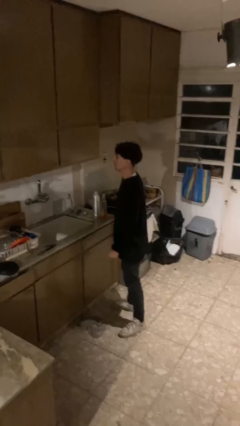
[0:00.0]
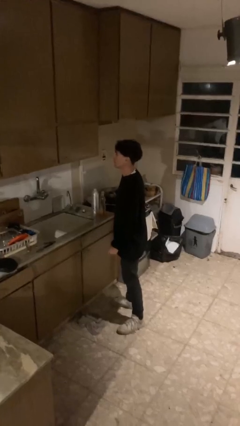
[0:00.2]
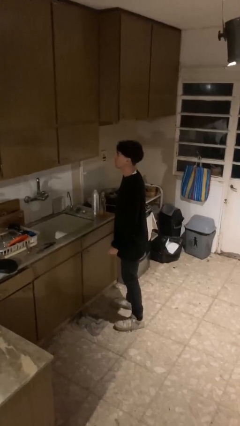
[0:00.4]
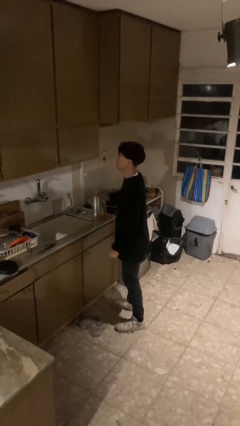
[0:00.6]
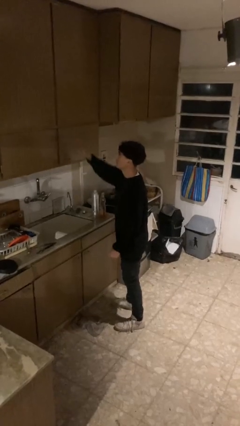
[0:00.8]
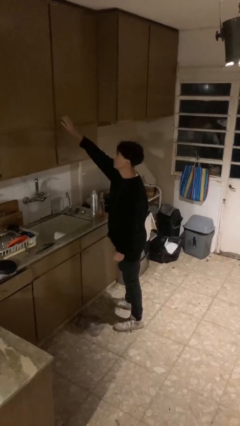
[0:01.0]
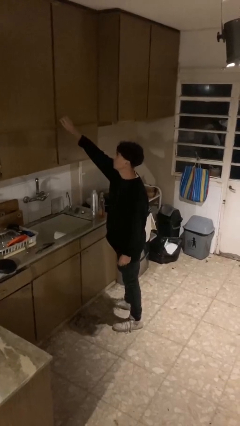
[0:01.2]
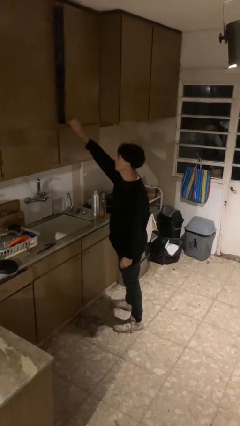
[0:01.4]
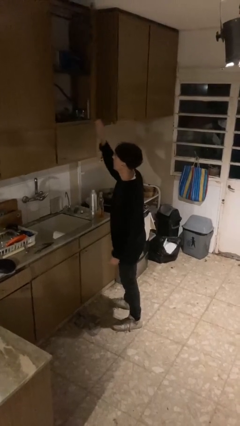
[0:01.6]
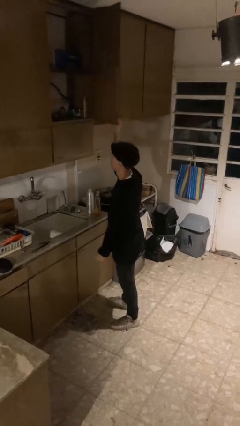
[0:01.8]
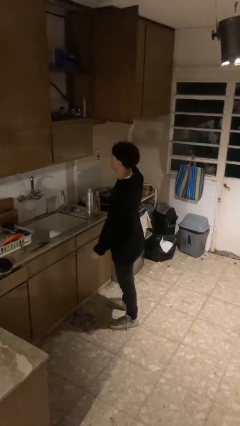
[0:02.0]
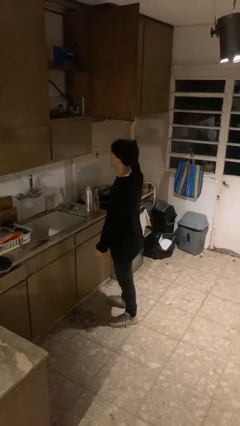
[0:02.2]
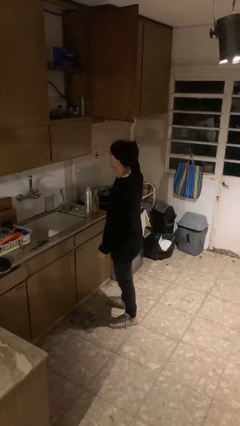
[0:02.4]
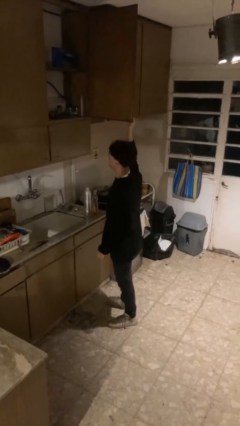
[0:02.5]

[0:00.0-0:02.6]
person closes cabinet

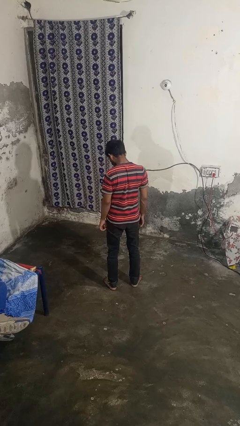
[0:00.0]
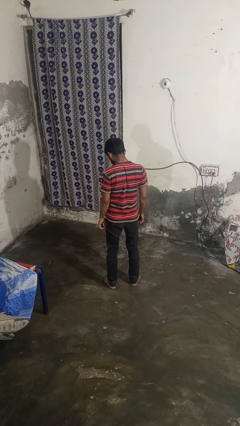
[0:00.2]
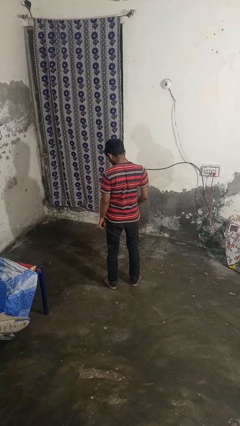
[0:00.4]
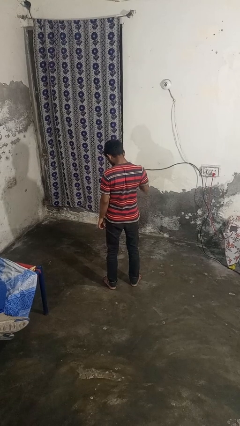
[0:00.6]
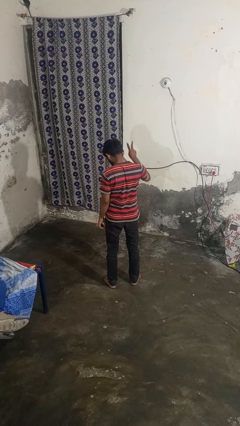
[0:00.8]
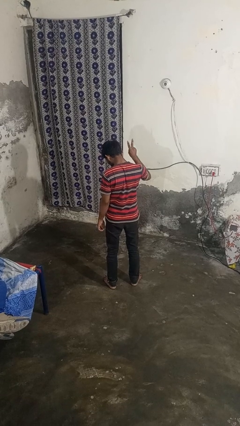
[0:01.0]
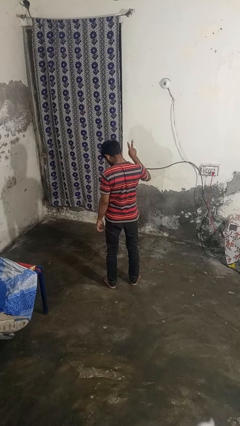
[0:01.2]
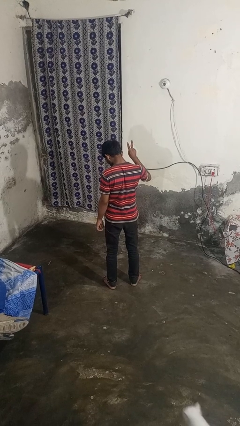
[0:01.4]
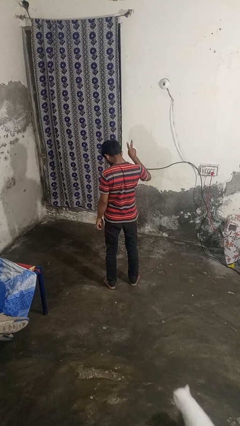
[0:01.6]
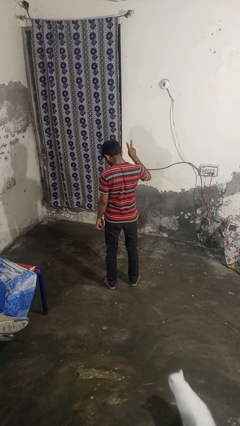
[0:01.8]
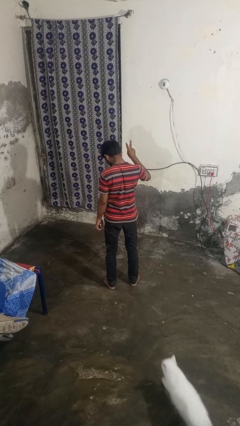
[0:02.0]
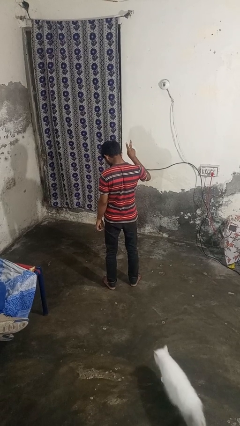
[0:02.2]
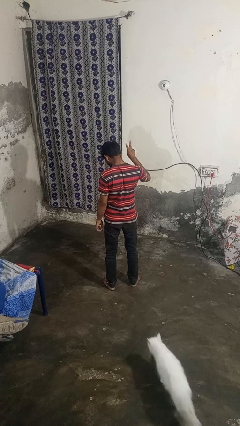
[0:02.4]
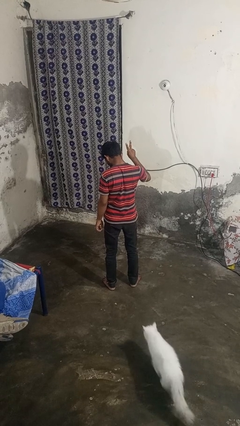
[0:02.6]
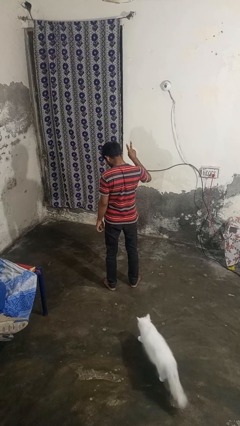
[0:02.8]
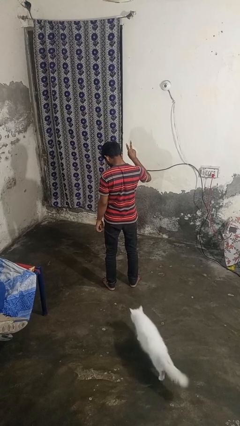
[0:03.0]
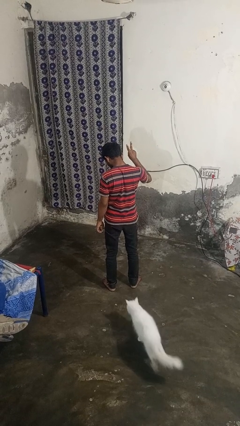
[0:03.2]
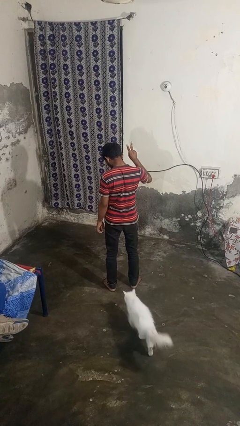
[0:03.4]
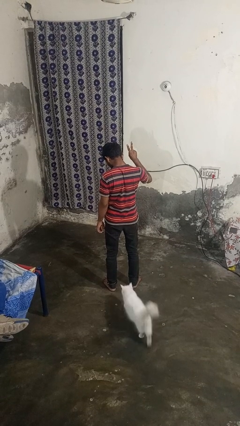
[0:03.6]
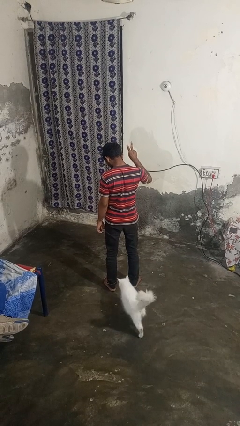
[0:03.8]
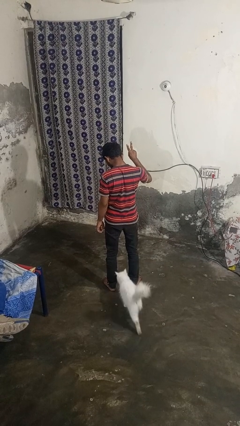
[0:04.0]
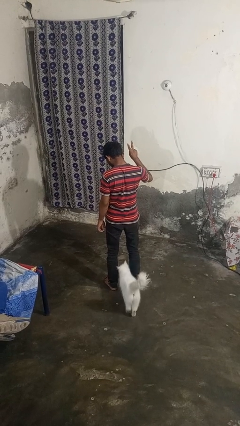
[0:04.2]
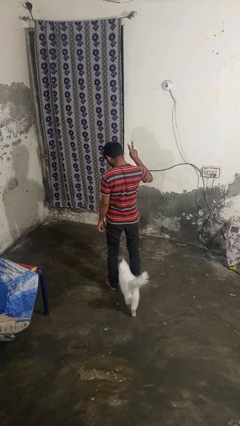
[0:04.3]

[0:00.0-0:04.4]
person gestures peace

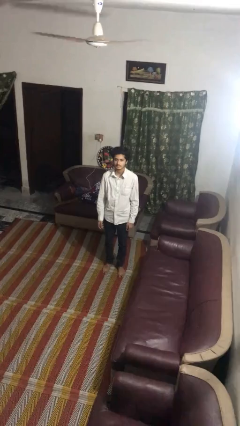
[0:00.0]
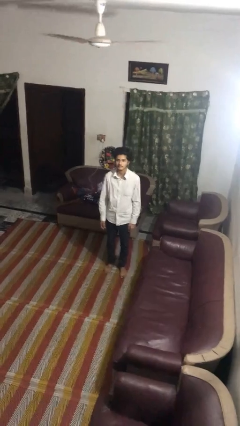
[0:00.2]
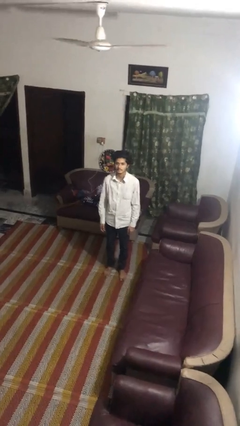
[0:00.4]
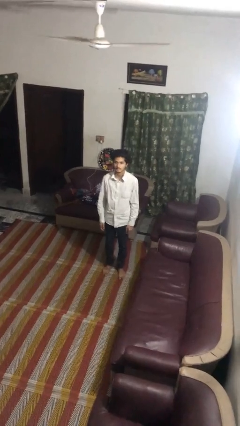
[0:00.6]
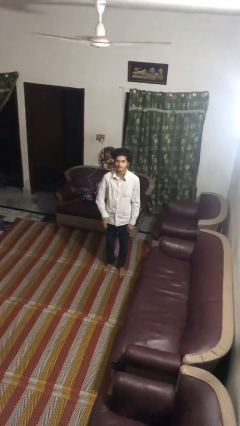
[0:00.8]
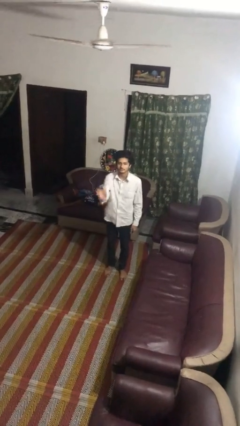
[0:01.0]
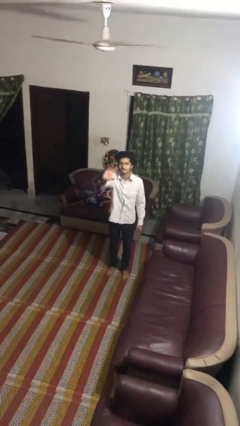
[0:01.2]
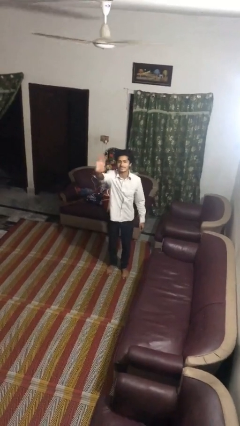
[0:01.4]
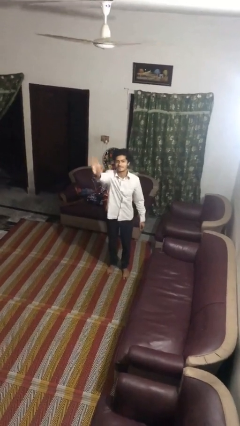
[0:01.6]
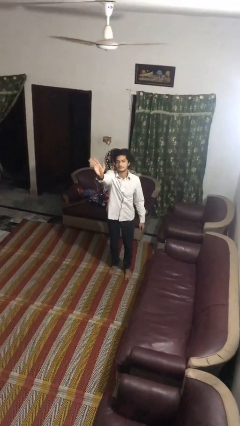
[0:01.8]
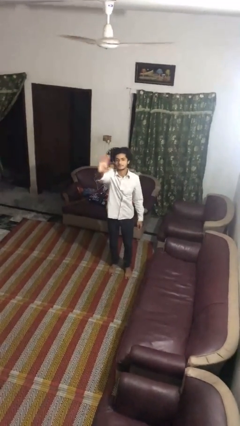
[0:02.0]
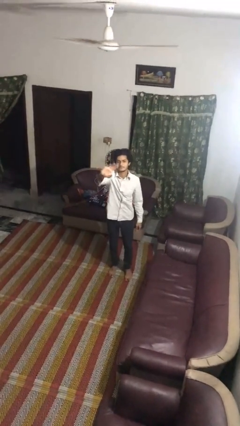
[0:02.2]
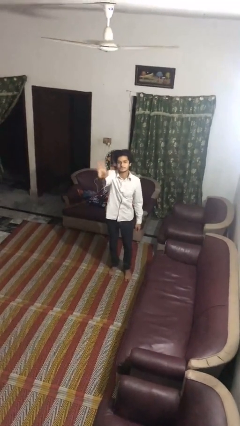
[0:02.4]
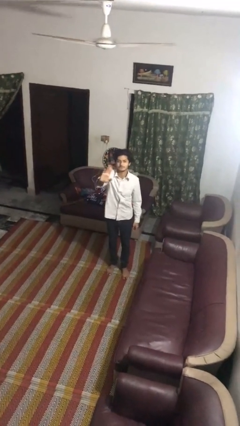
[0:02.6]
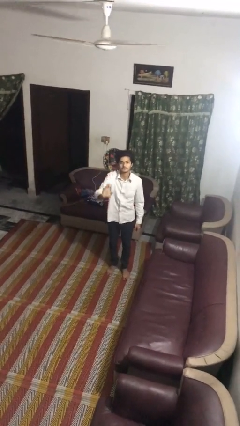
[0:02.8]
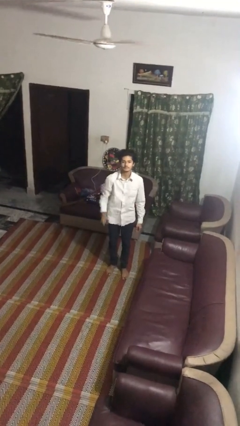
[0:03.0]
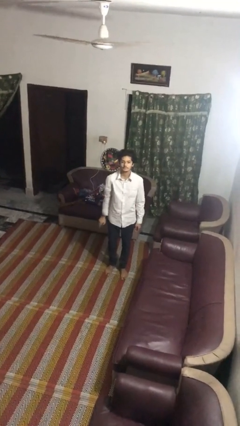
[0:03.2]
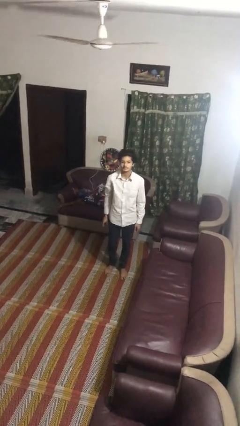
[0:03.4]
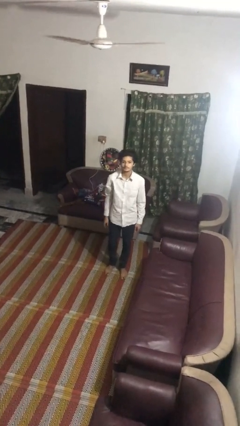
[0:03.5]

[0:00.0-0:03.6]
person waves at person

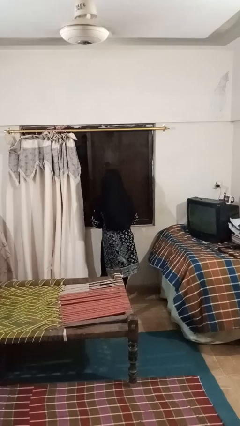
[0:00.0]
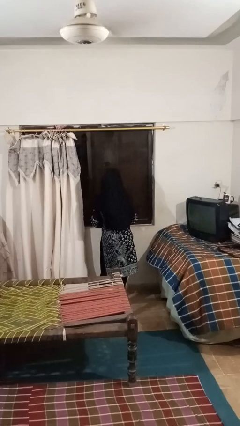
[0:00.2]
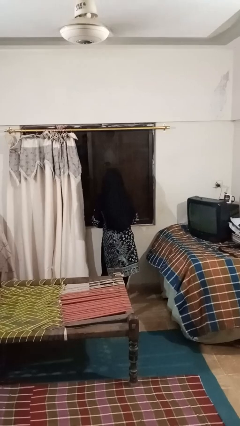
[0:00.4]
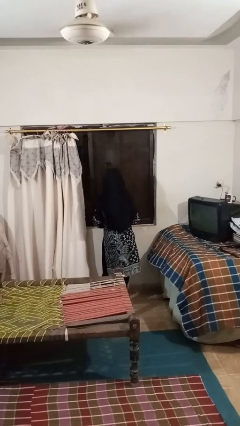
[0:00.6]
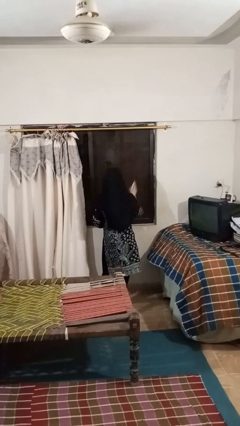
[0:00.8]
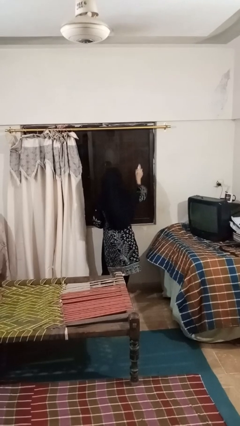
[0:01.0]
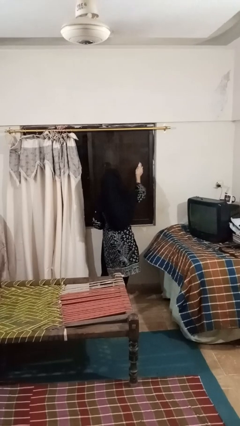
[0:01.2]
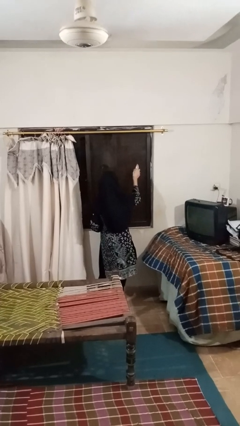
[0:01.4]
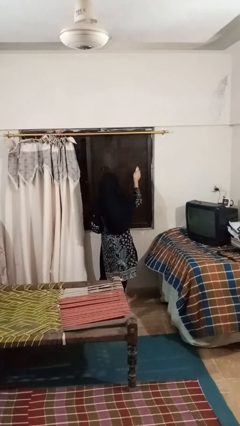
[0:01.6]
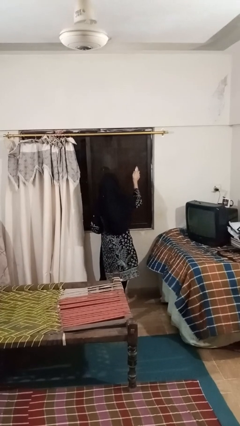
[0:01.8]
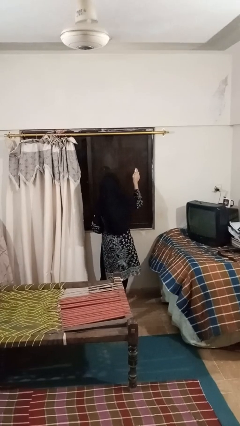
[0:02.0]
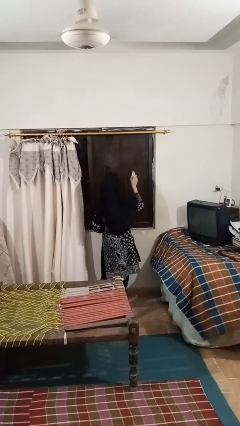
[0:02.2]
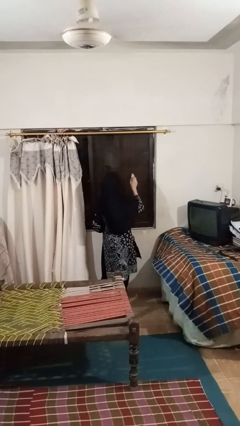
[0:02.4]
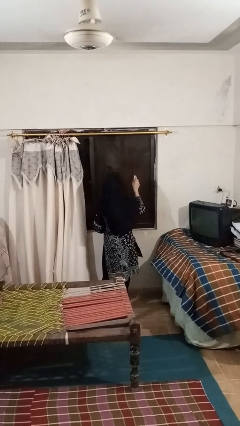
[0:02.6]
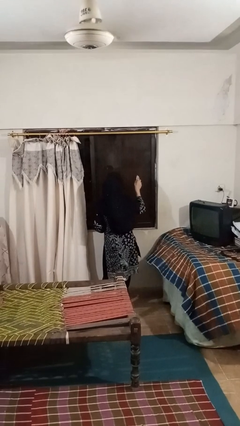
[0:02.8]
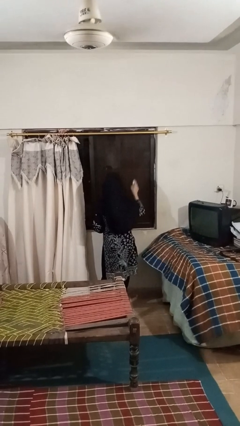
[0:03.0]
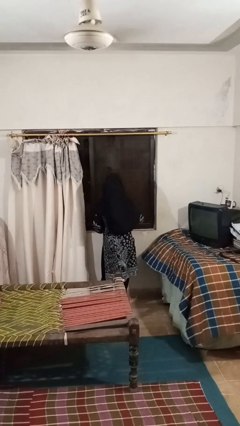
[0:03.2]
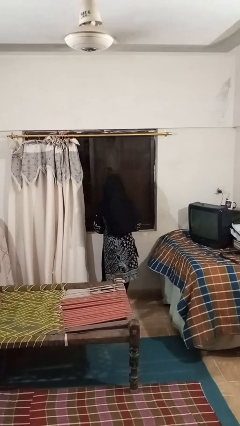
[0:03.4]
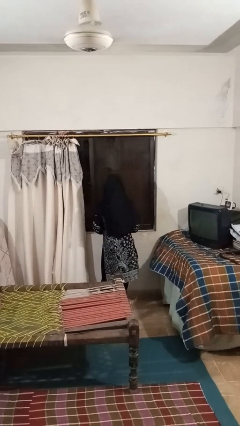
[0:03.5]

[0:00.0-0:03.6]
person sprays from bottle

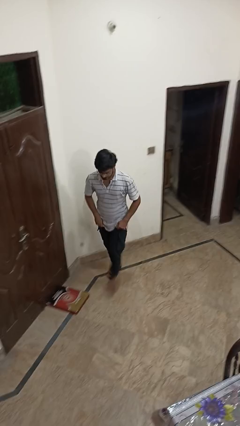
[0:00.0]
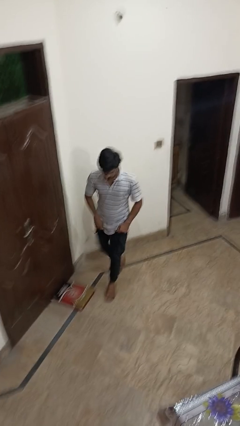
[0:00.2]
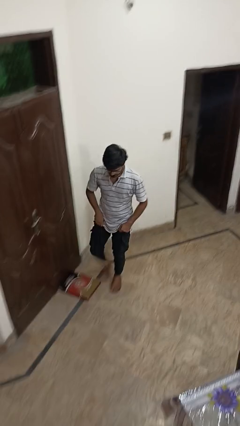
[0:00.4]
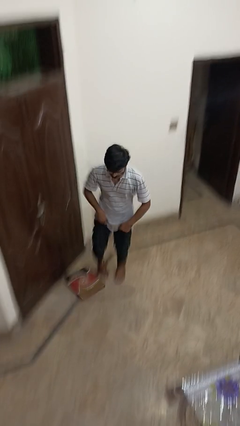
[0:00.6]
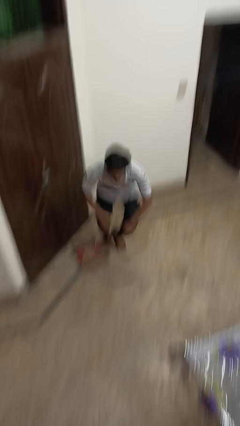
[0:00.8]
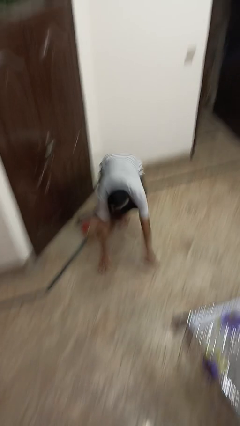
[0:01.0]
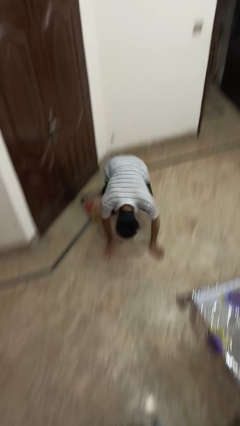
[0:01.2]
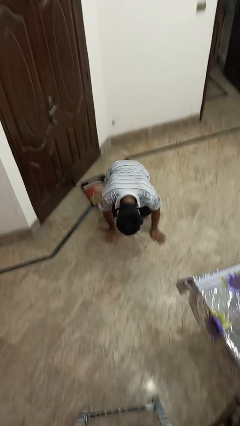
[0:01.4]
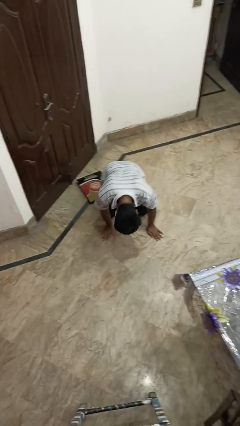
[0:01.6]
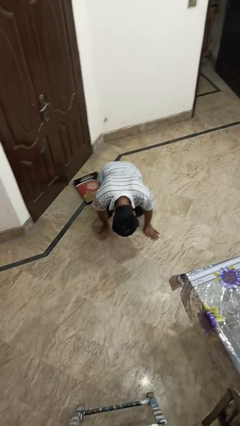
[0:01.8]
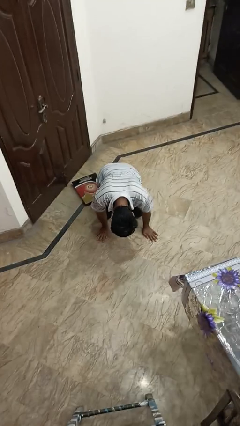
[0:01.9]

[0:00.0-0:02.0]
person trips on object on floor

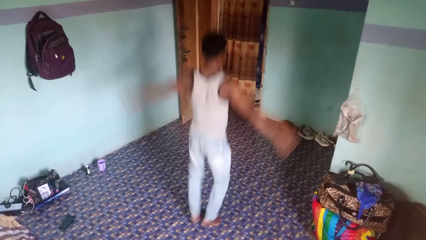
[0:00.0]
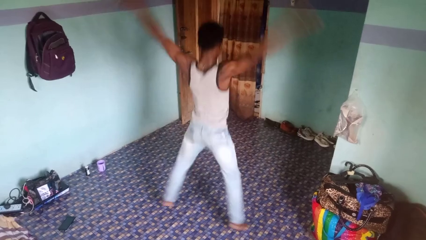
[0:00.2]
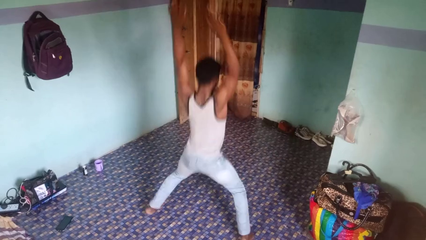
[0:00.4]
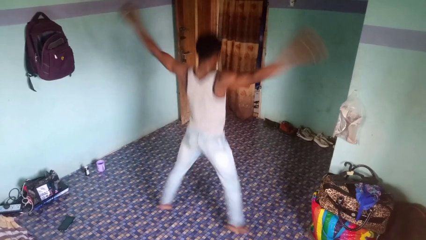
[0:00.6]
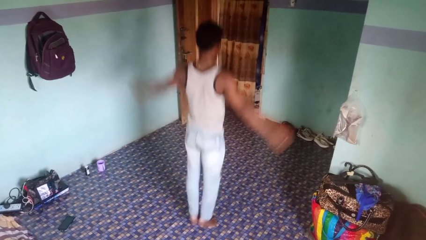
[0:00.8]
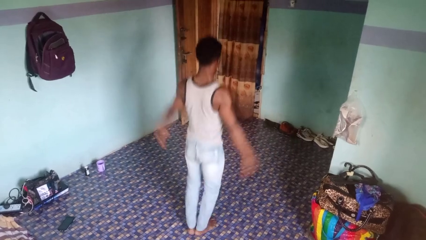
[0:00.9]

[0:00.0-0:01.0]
person exercises with jumping jacks
